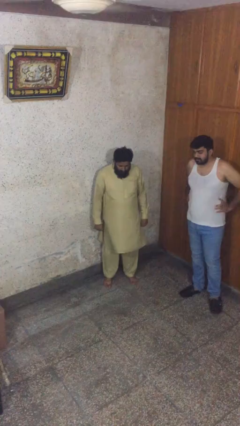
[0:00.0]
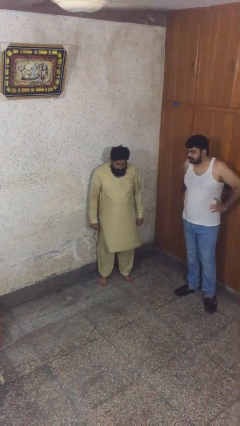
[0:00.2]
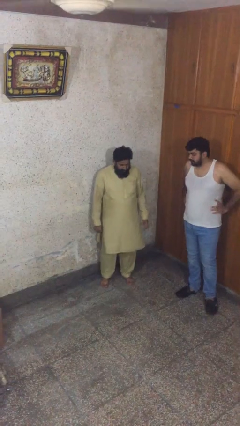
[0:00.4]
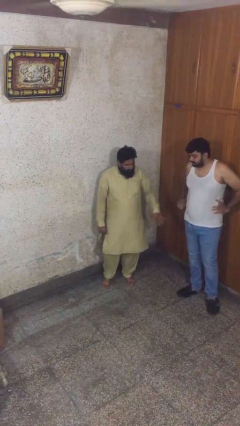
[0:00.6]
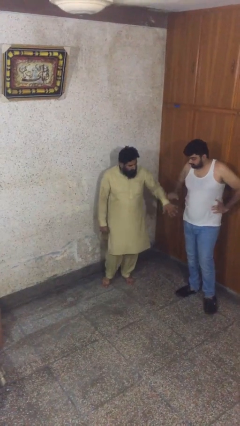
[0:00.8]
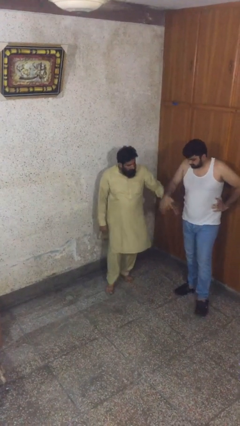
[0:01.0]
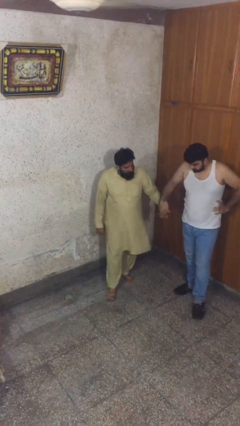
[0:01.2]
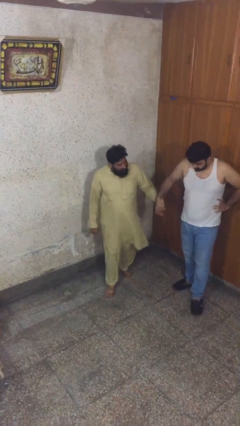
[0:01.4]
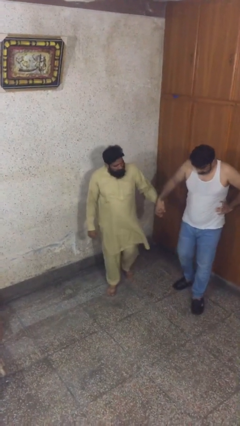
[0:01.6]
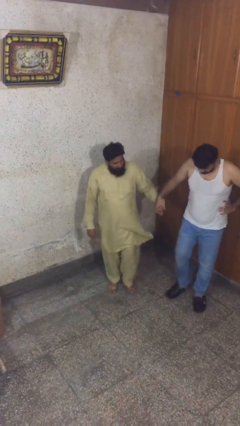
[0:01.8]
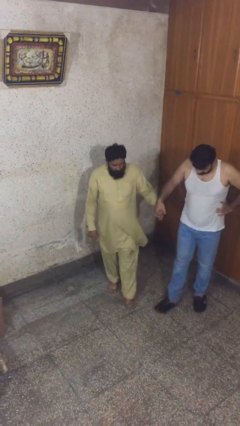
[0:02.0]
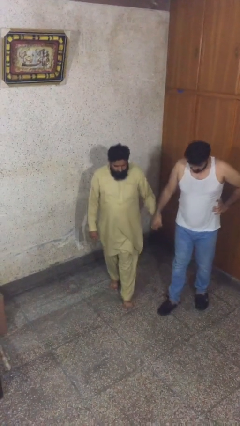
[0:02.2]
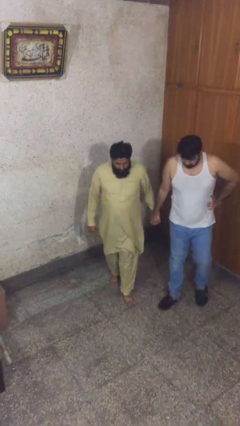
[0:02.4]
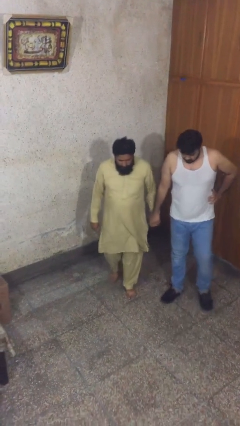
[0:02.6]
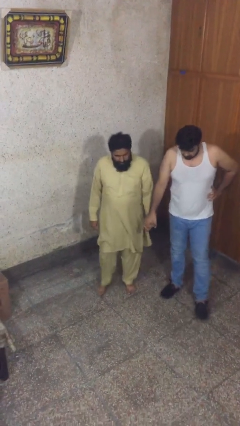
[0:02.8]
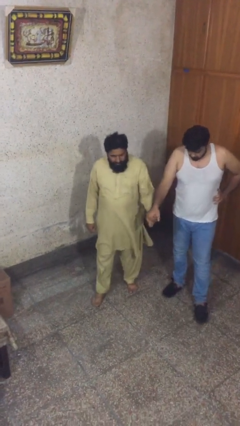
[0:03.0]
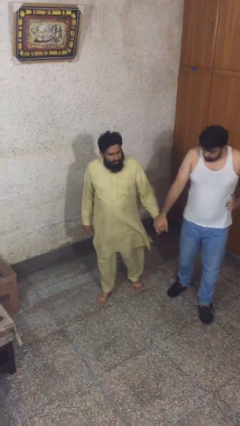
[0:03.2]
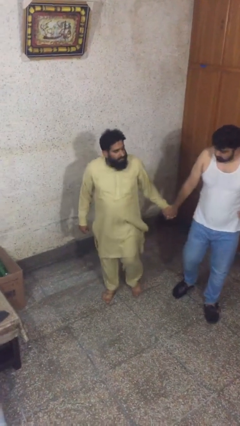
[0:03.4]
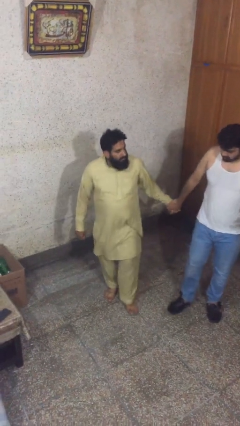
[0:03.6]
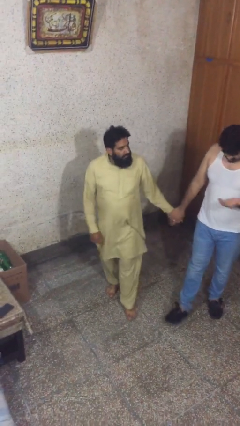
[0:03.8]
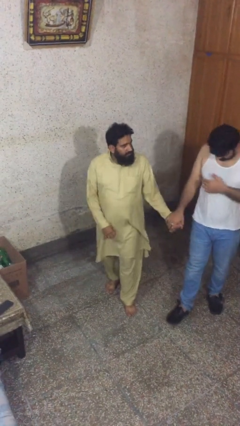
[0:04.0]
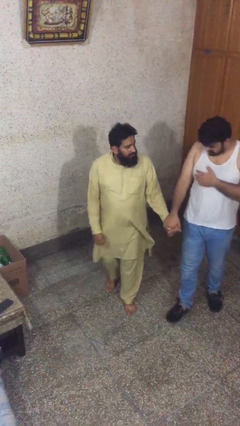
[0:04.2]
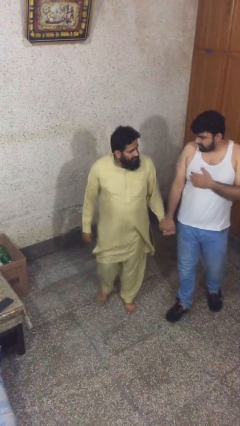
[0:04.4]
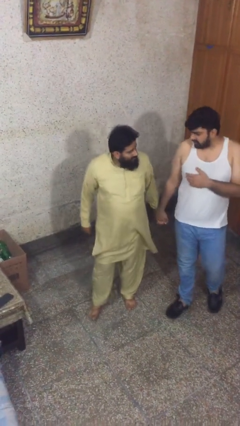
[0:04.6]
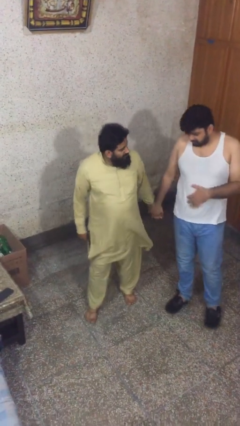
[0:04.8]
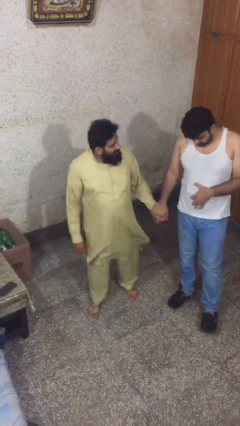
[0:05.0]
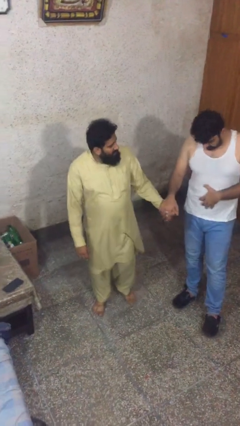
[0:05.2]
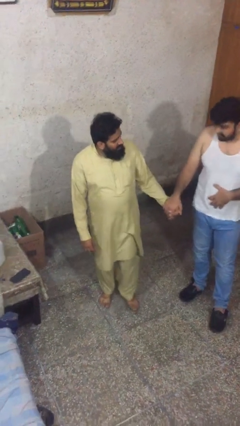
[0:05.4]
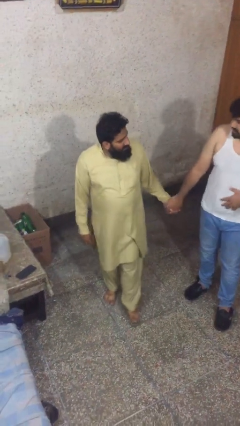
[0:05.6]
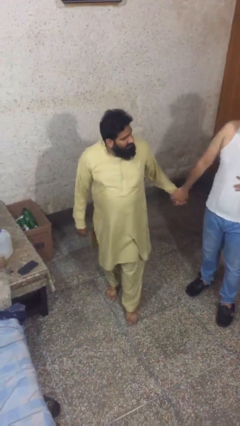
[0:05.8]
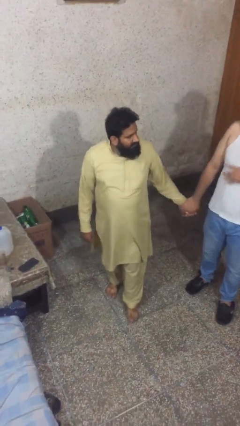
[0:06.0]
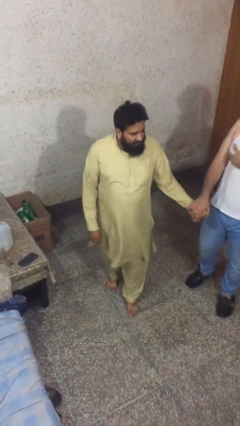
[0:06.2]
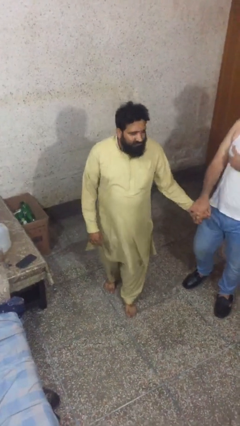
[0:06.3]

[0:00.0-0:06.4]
person holds hand

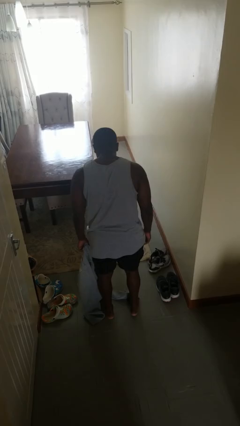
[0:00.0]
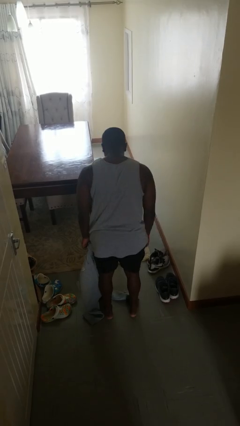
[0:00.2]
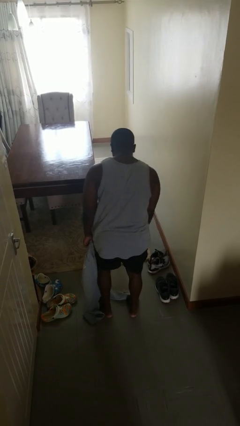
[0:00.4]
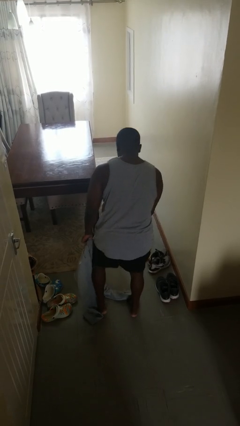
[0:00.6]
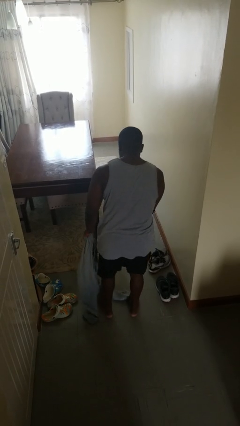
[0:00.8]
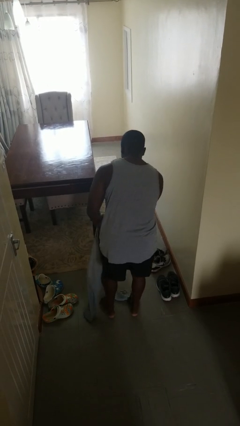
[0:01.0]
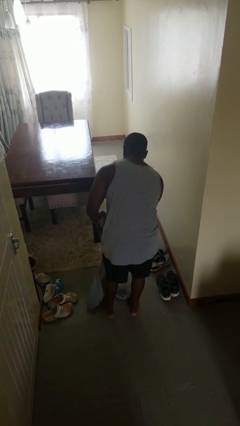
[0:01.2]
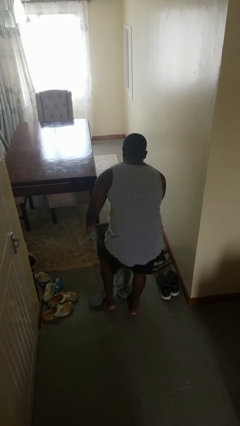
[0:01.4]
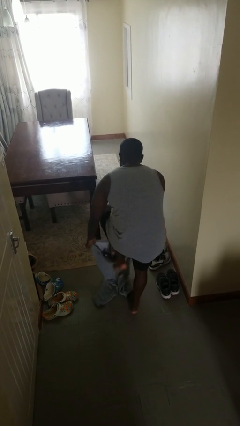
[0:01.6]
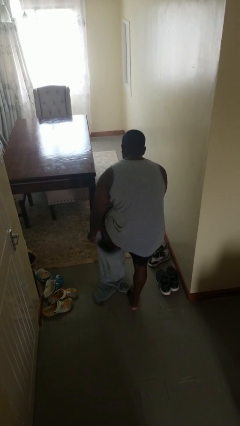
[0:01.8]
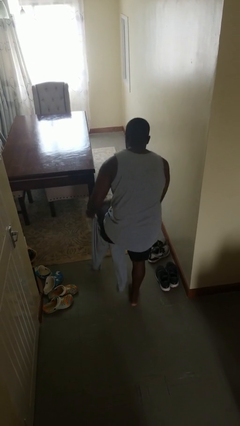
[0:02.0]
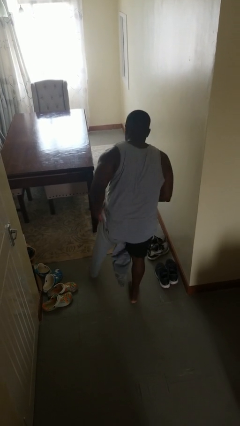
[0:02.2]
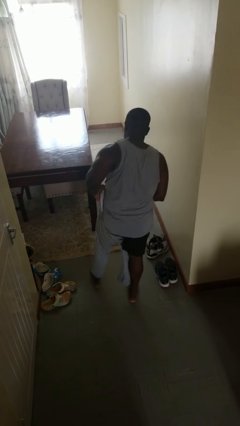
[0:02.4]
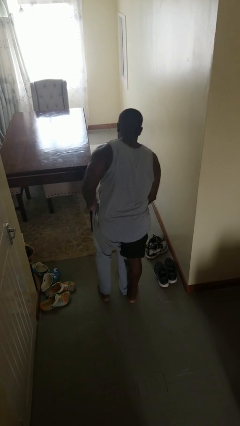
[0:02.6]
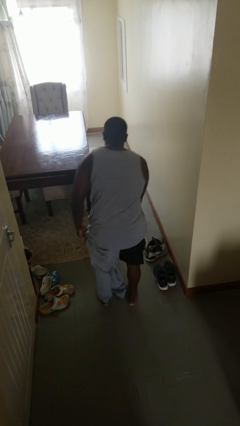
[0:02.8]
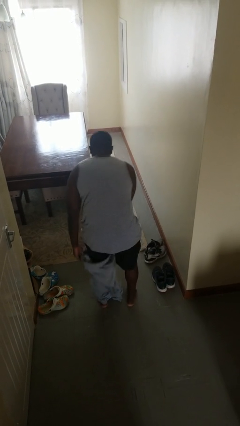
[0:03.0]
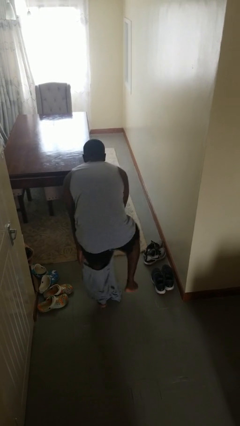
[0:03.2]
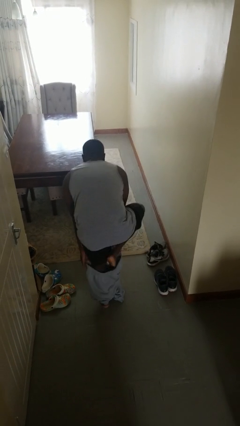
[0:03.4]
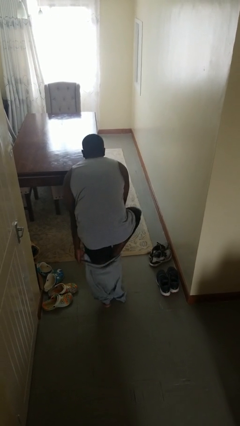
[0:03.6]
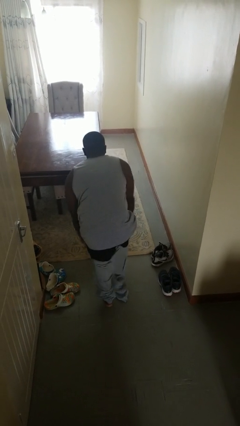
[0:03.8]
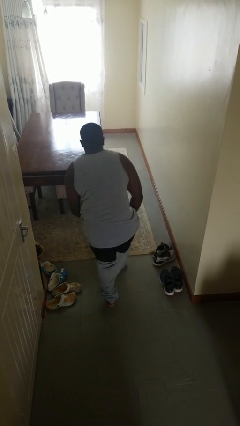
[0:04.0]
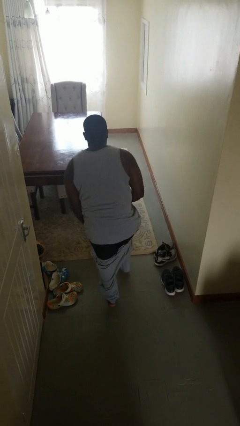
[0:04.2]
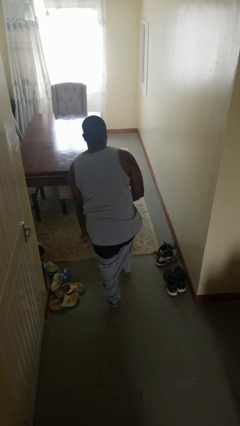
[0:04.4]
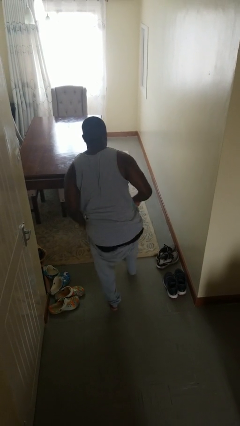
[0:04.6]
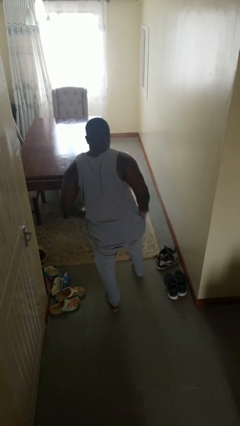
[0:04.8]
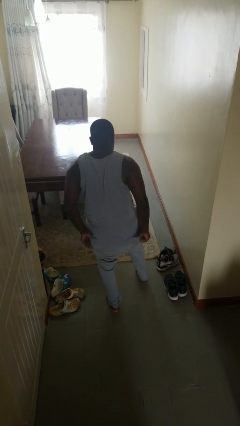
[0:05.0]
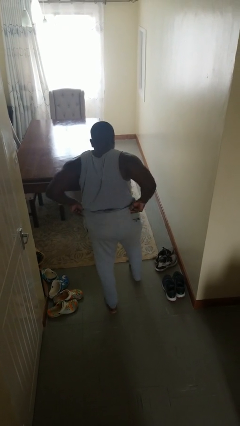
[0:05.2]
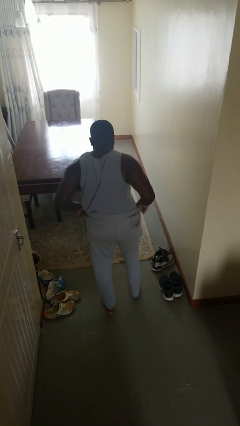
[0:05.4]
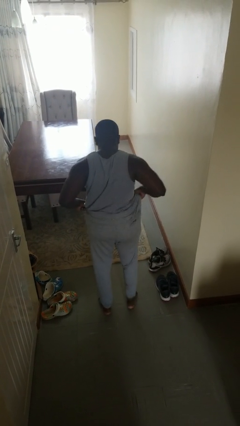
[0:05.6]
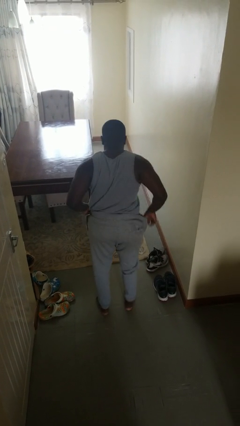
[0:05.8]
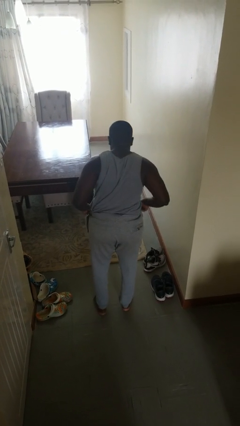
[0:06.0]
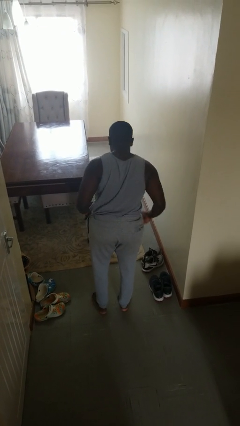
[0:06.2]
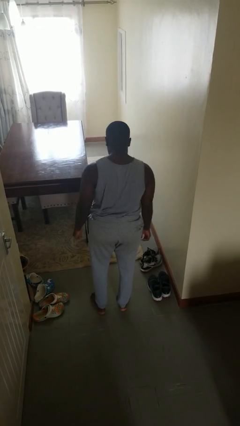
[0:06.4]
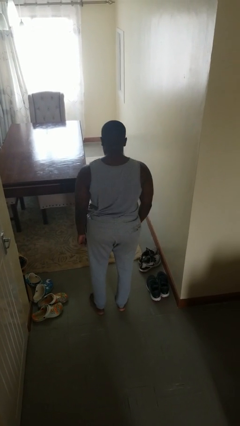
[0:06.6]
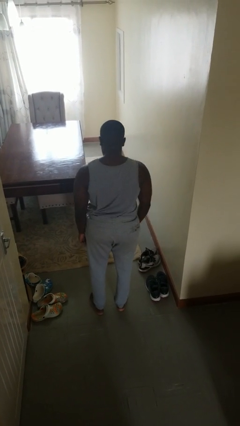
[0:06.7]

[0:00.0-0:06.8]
person puts on pants

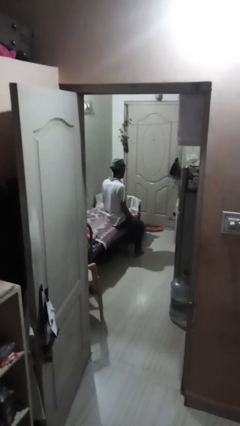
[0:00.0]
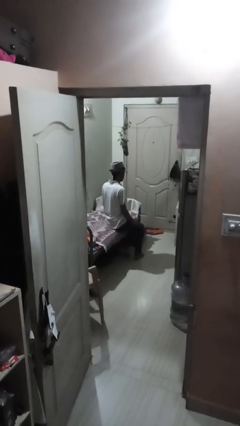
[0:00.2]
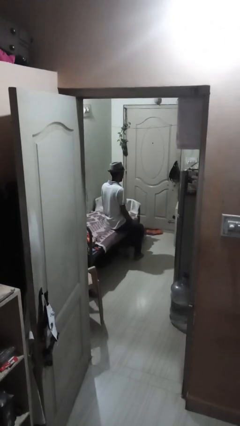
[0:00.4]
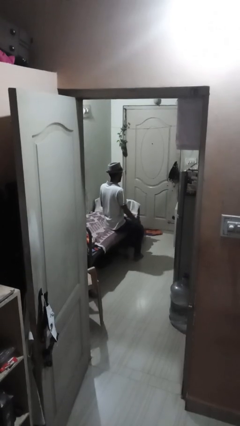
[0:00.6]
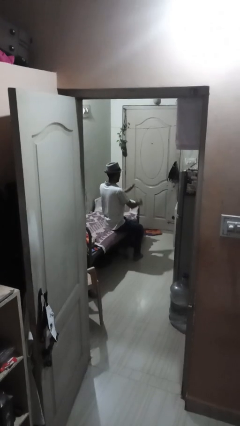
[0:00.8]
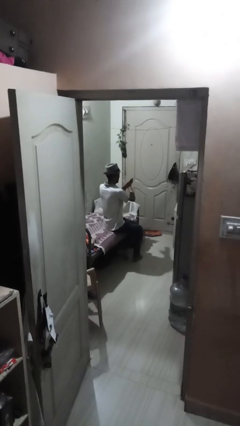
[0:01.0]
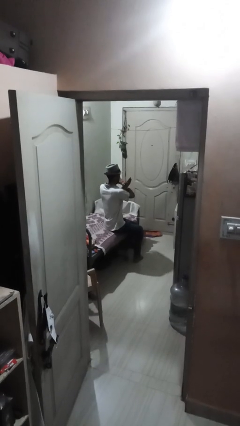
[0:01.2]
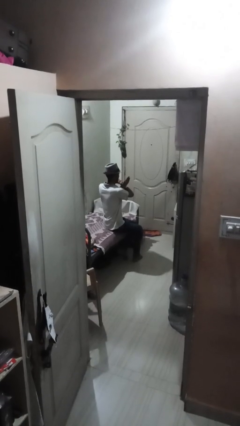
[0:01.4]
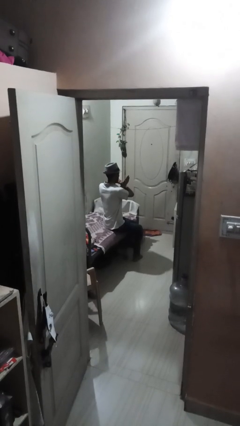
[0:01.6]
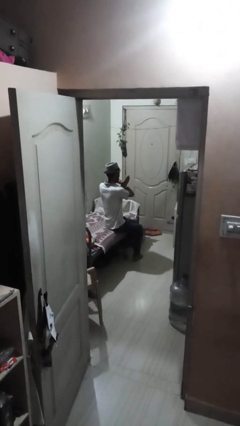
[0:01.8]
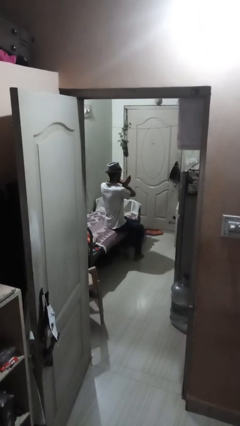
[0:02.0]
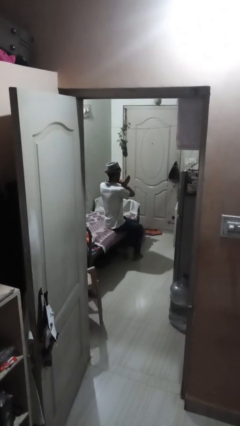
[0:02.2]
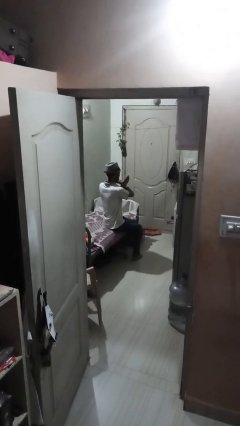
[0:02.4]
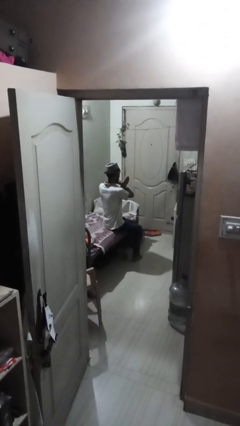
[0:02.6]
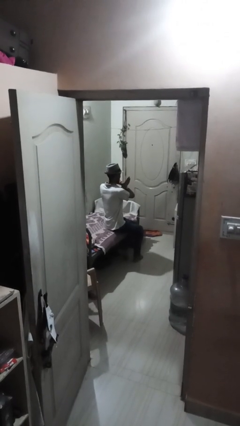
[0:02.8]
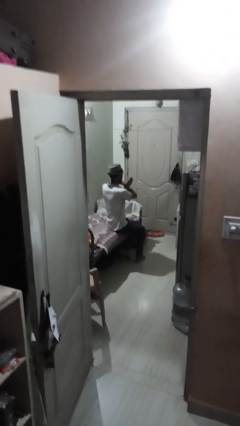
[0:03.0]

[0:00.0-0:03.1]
person gestures arms x

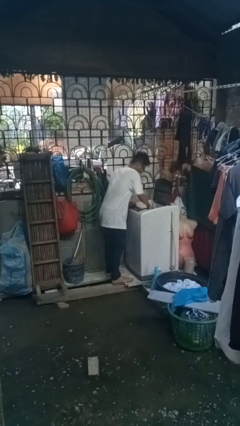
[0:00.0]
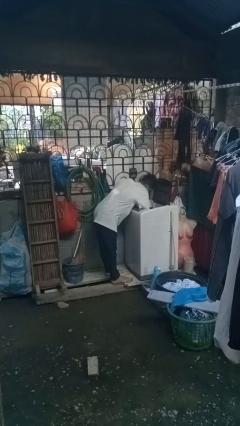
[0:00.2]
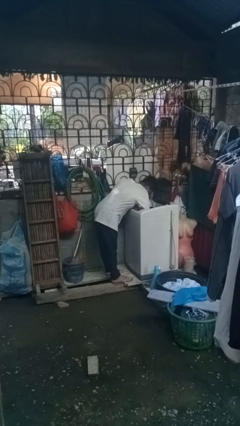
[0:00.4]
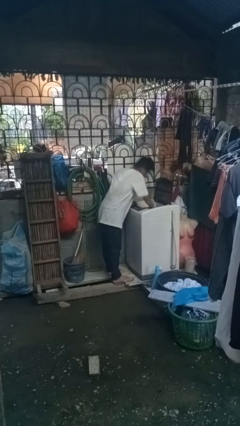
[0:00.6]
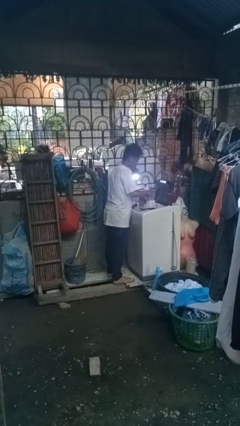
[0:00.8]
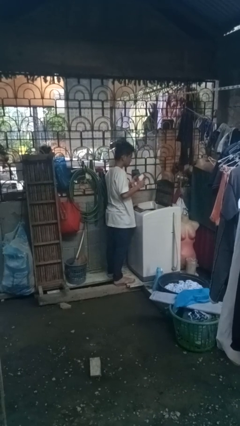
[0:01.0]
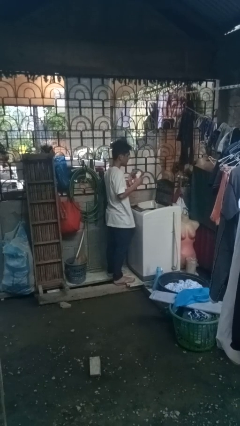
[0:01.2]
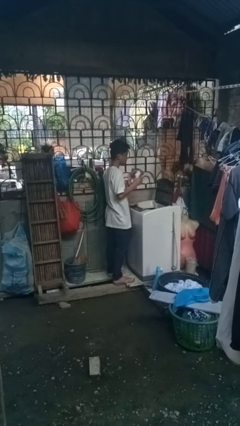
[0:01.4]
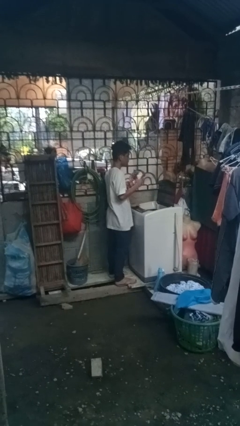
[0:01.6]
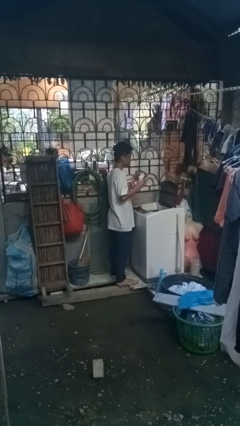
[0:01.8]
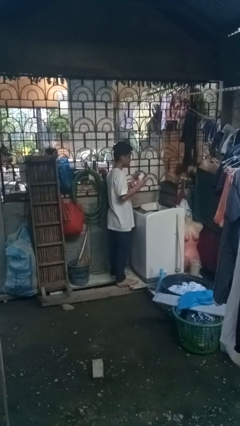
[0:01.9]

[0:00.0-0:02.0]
person unloads clotheswasher
